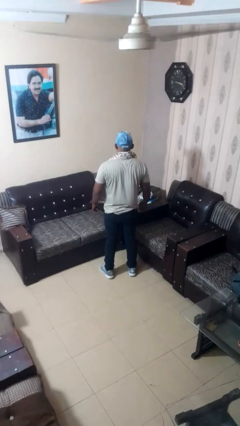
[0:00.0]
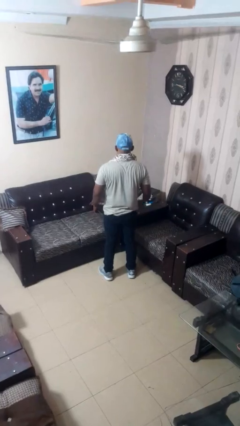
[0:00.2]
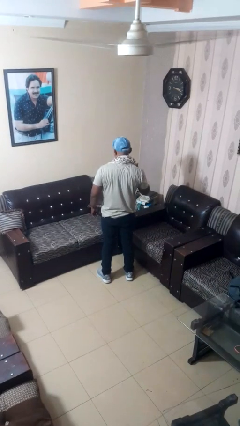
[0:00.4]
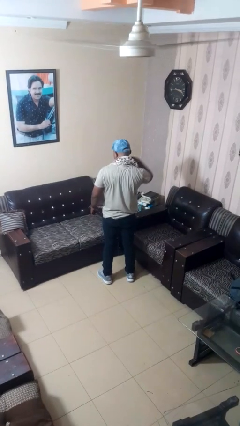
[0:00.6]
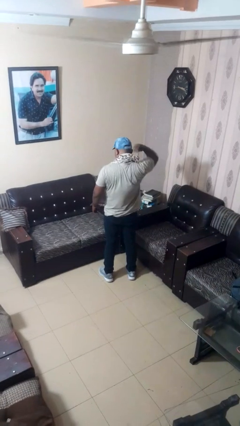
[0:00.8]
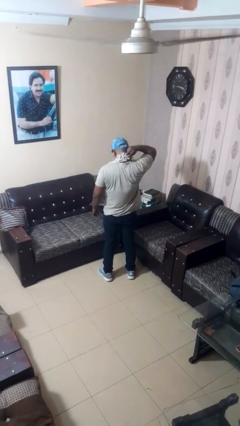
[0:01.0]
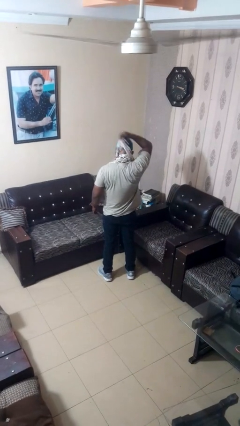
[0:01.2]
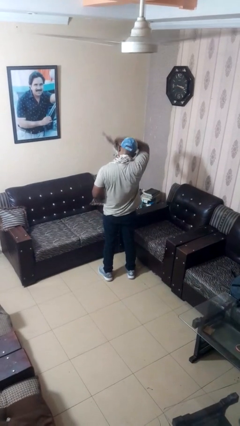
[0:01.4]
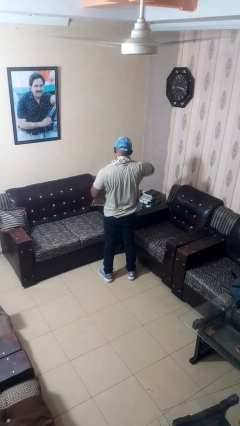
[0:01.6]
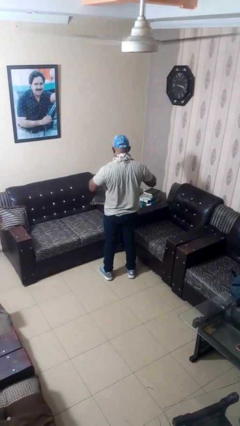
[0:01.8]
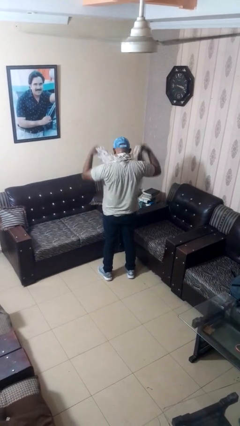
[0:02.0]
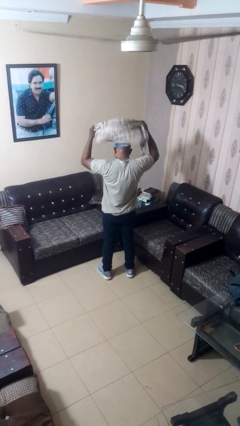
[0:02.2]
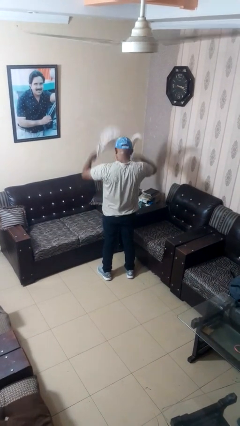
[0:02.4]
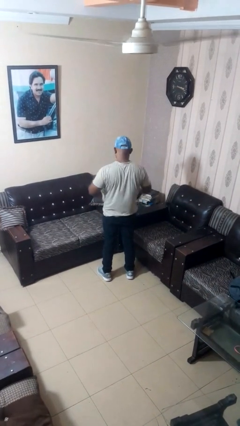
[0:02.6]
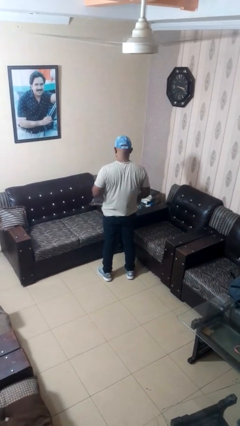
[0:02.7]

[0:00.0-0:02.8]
person takes off scarf

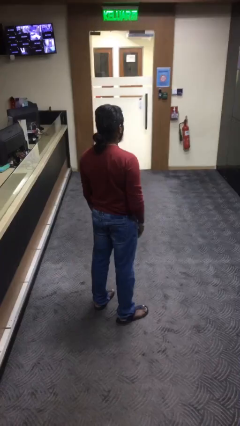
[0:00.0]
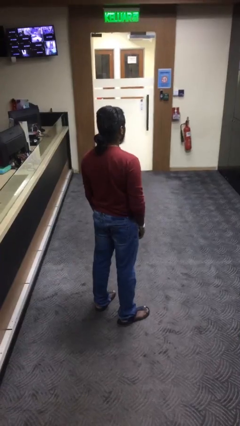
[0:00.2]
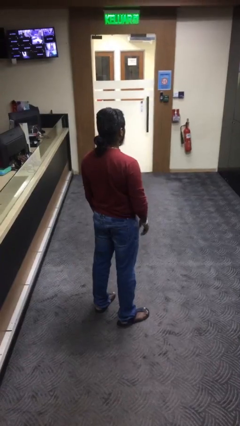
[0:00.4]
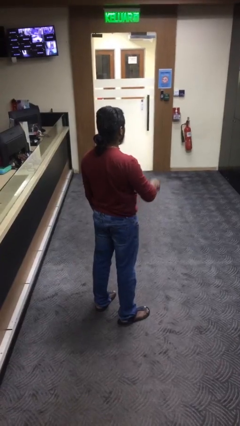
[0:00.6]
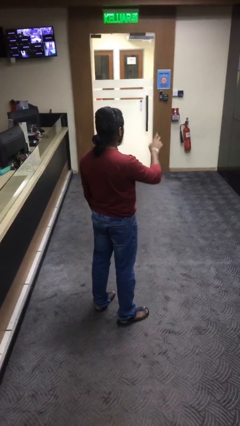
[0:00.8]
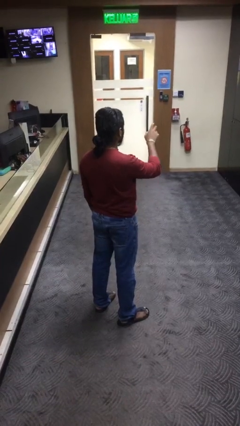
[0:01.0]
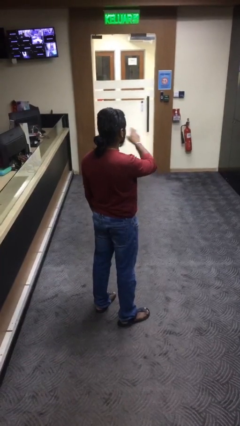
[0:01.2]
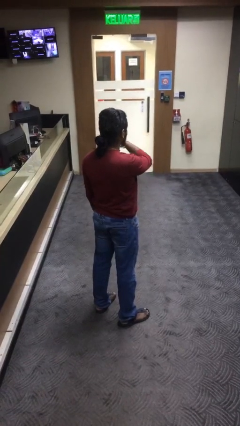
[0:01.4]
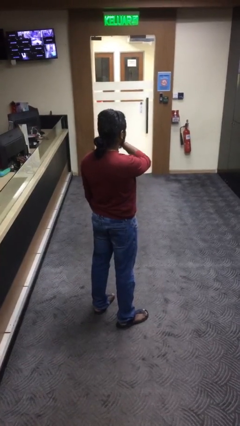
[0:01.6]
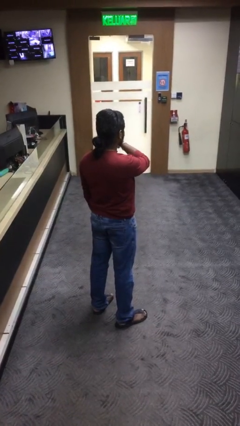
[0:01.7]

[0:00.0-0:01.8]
person gestures swipe left

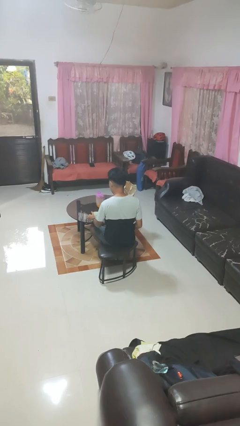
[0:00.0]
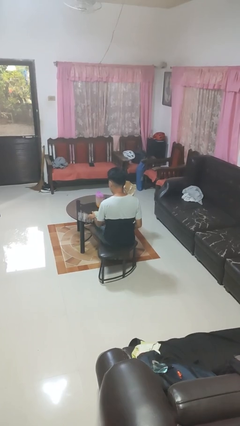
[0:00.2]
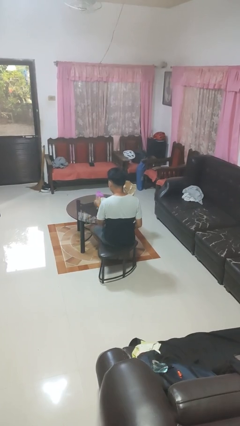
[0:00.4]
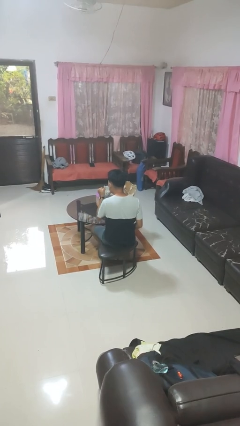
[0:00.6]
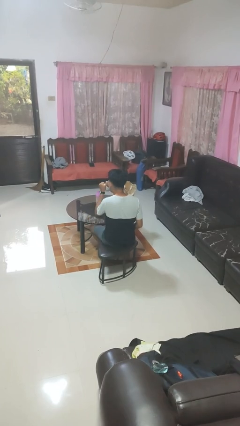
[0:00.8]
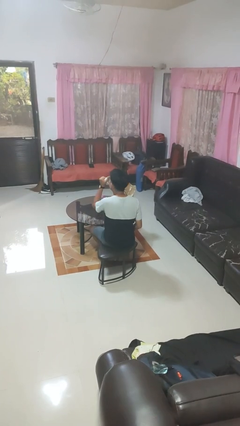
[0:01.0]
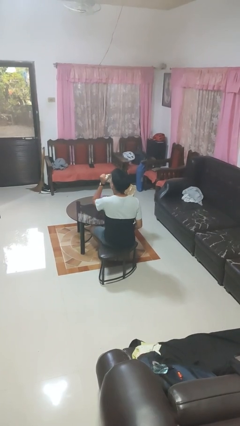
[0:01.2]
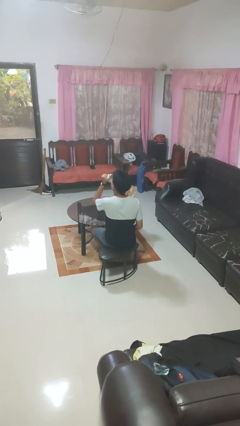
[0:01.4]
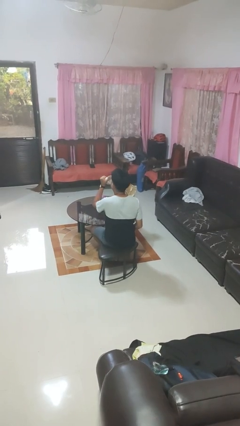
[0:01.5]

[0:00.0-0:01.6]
person drinks from mug

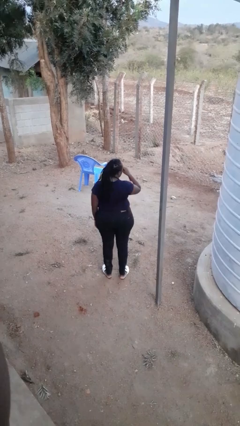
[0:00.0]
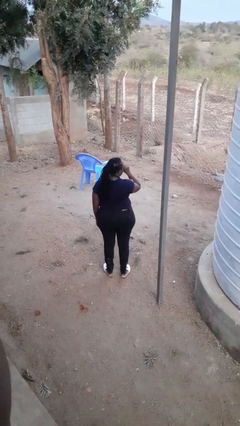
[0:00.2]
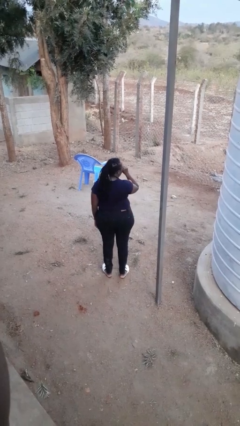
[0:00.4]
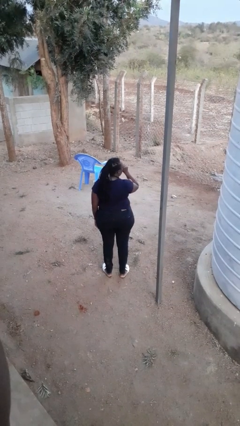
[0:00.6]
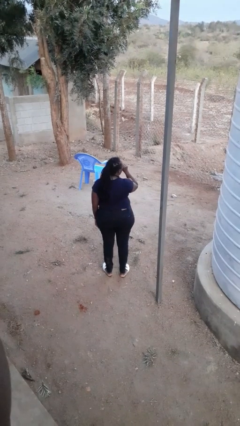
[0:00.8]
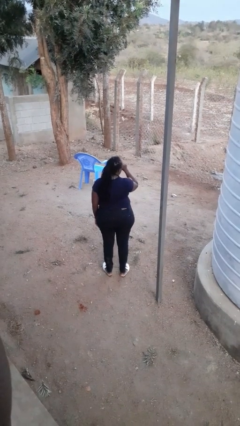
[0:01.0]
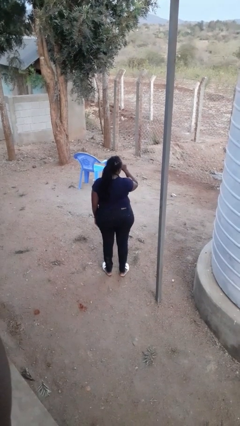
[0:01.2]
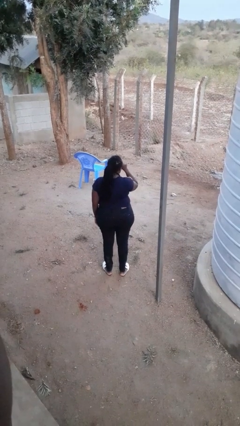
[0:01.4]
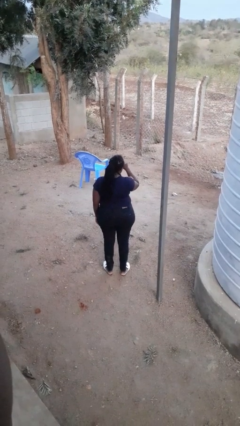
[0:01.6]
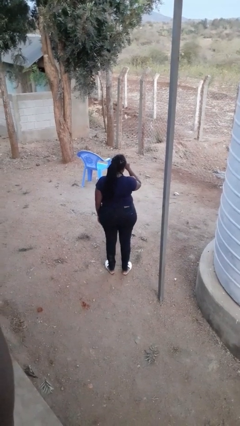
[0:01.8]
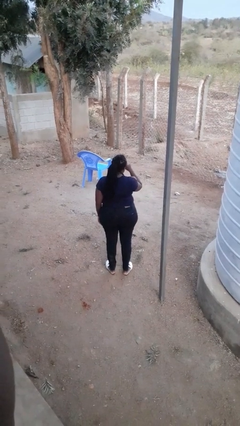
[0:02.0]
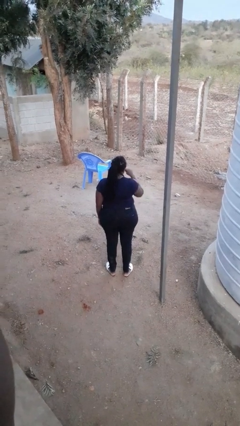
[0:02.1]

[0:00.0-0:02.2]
person rubs eyes

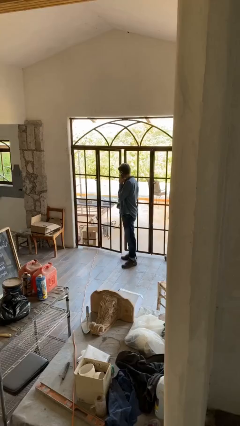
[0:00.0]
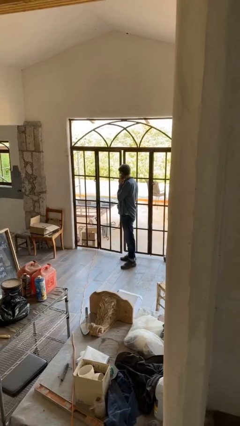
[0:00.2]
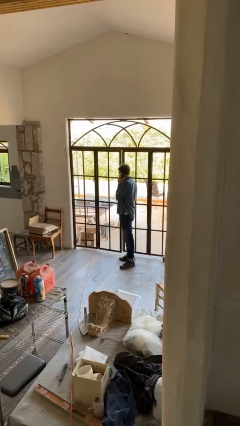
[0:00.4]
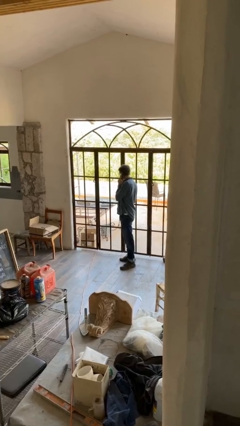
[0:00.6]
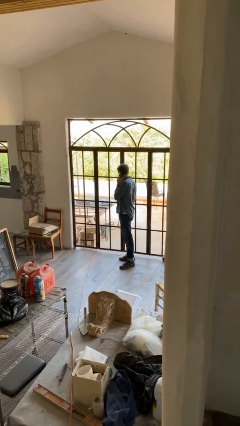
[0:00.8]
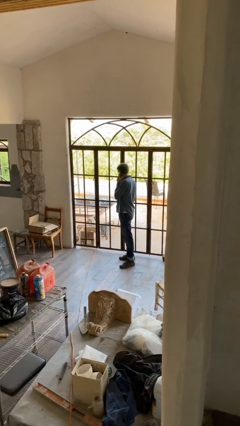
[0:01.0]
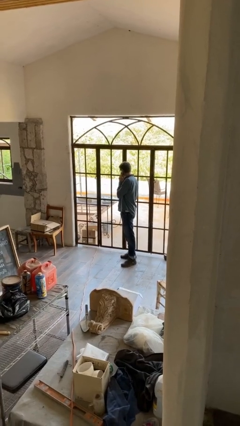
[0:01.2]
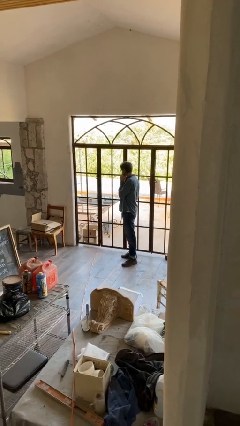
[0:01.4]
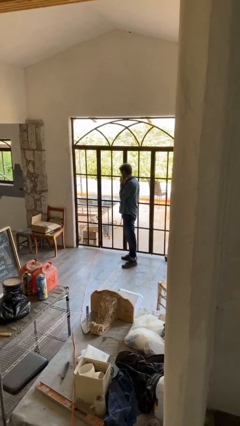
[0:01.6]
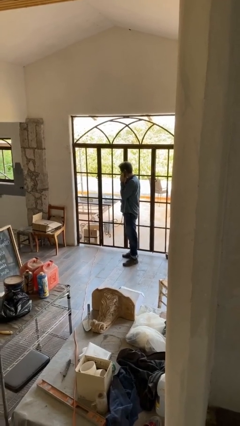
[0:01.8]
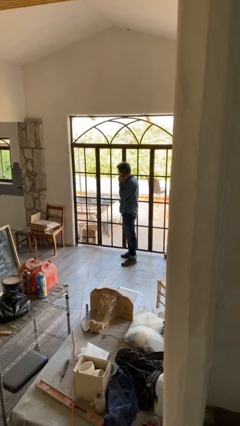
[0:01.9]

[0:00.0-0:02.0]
person closes facility door

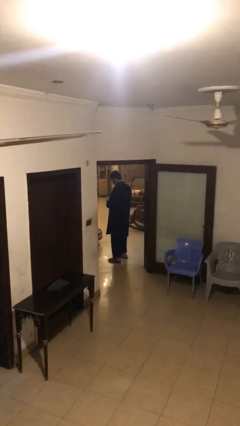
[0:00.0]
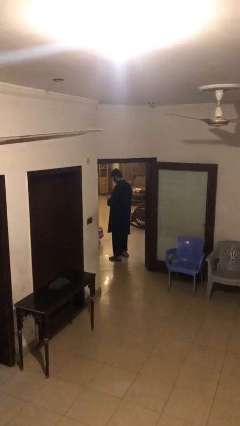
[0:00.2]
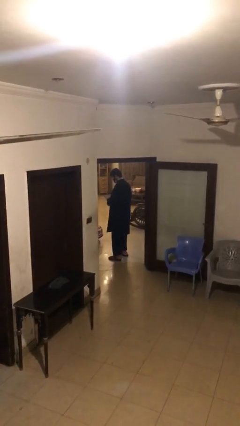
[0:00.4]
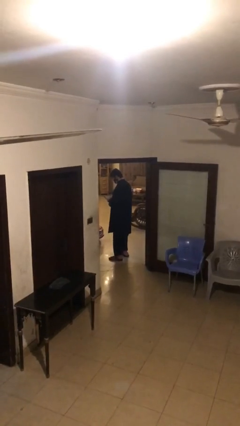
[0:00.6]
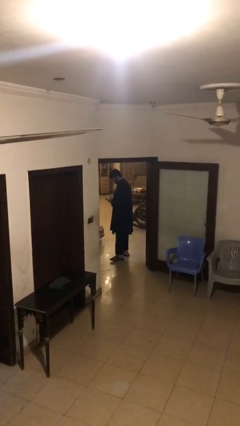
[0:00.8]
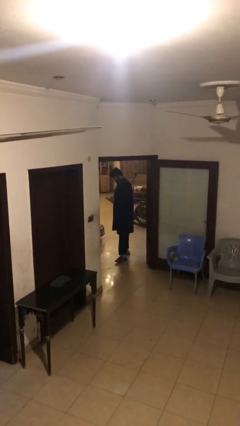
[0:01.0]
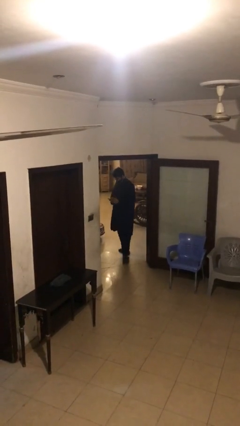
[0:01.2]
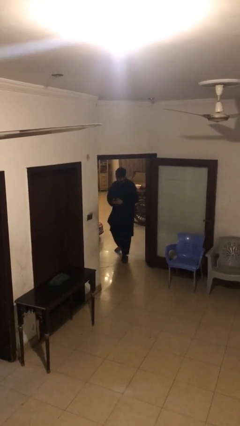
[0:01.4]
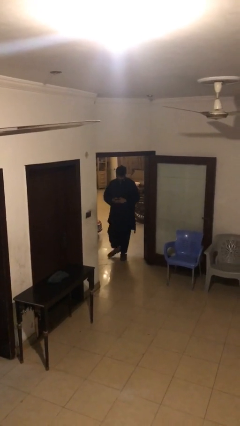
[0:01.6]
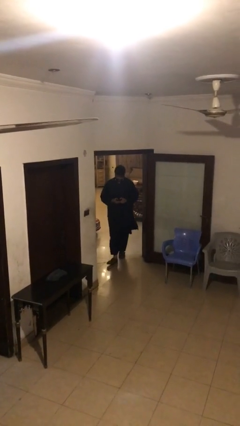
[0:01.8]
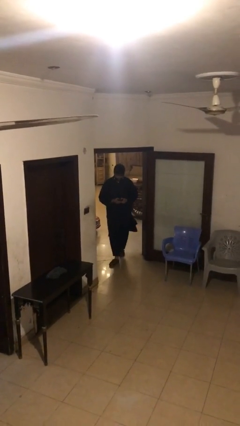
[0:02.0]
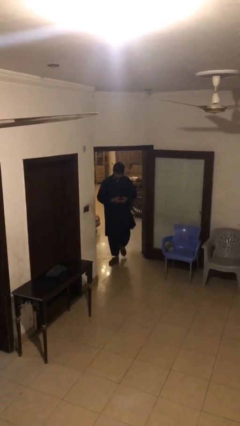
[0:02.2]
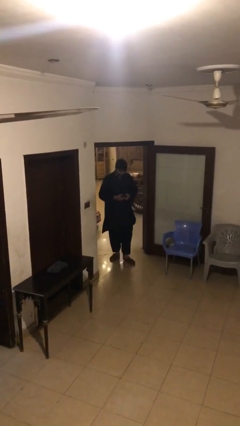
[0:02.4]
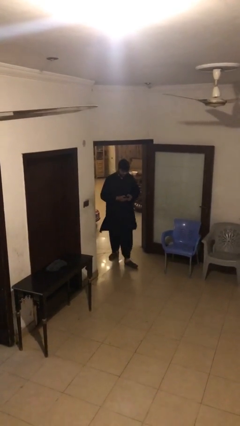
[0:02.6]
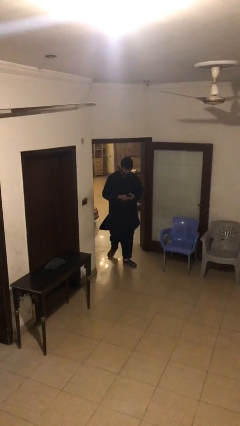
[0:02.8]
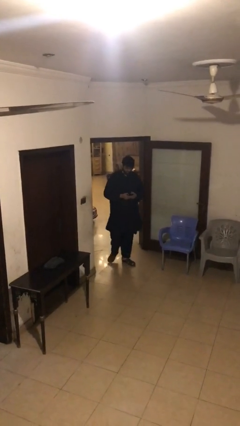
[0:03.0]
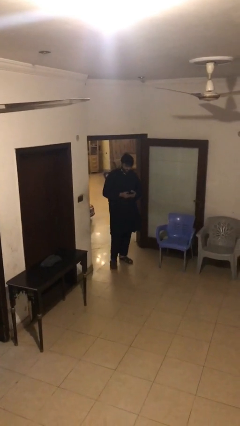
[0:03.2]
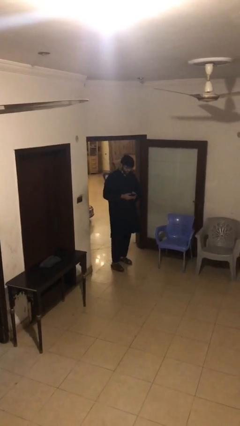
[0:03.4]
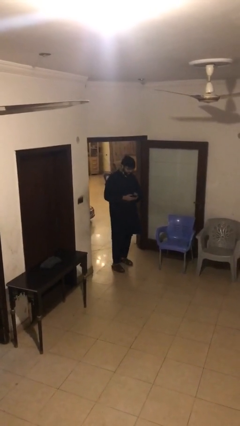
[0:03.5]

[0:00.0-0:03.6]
person enters scene through structure

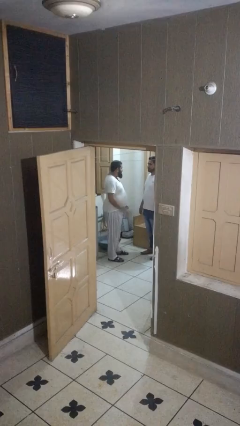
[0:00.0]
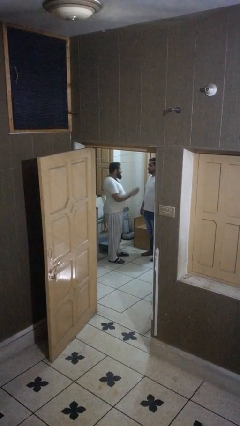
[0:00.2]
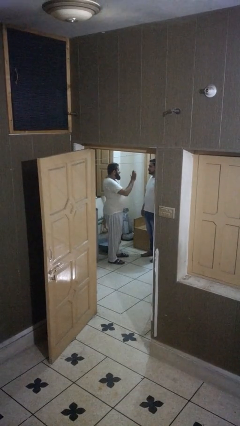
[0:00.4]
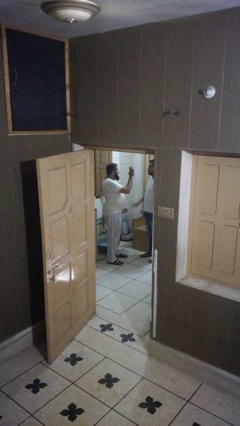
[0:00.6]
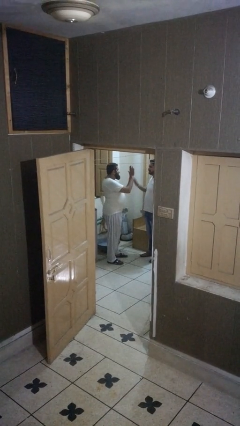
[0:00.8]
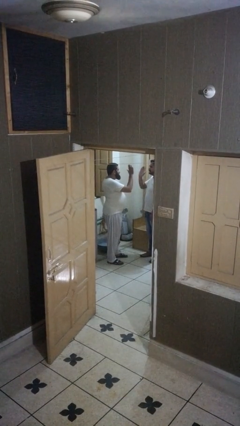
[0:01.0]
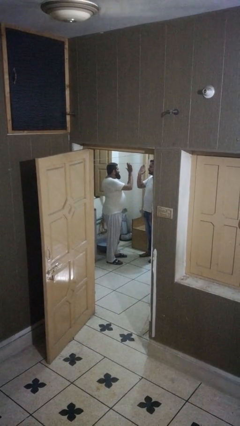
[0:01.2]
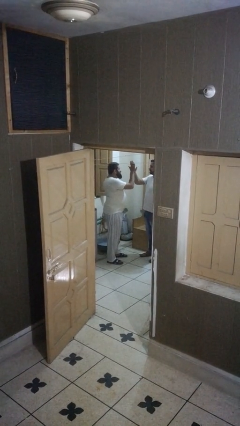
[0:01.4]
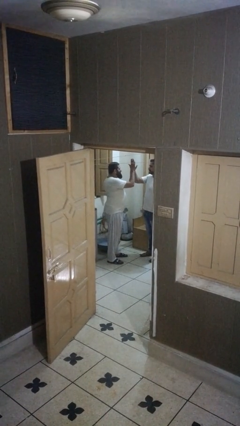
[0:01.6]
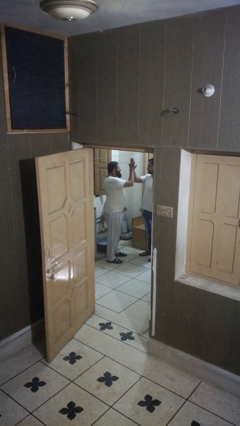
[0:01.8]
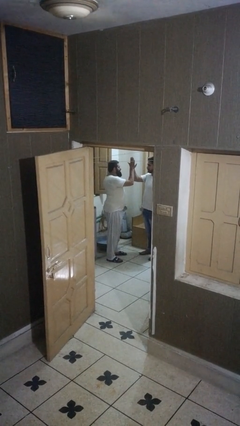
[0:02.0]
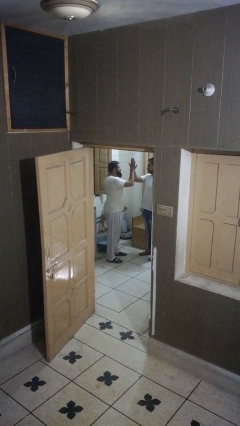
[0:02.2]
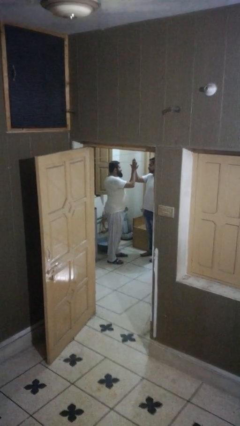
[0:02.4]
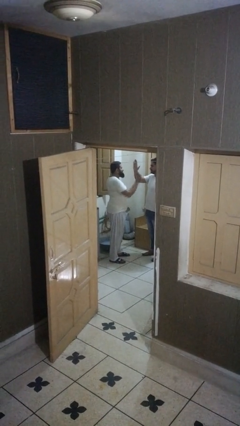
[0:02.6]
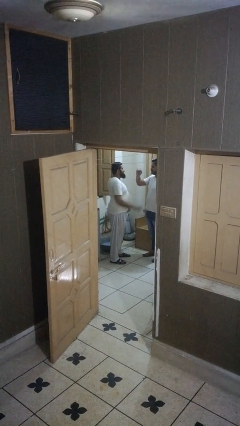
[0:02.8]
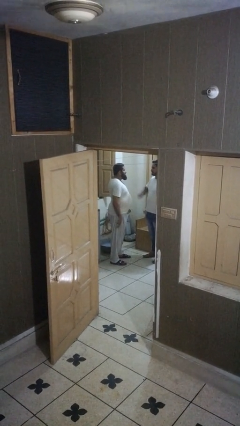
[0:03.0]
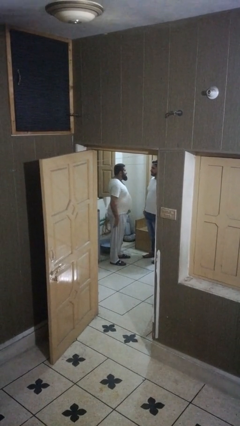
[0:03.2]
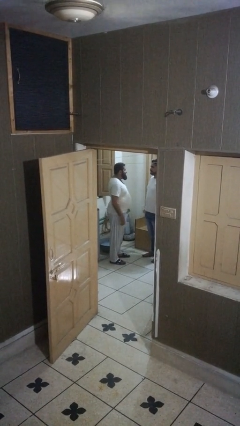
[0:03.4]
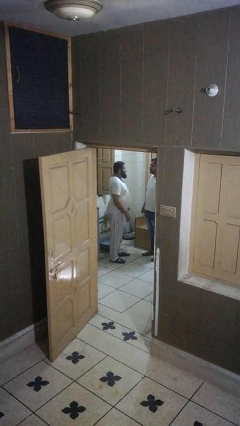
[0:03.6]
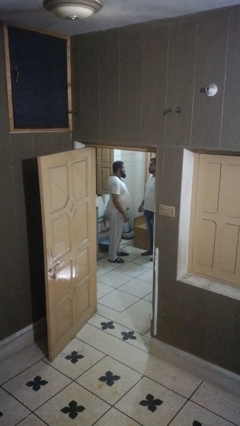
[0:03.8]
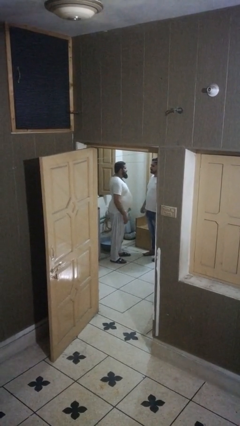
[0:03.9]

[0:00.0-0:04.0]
person highfives hand
